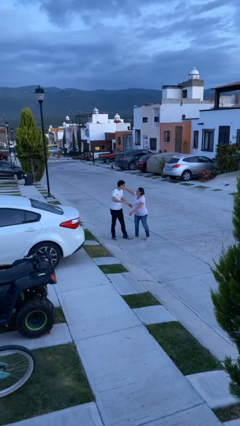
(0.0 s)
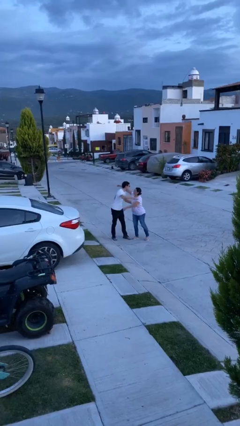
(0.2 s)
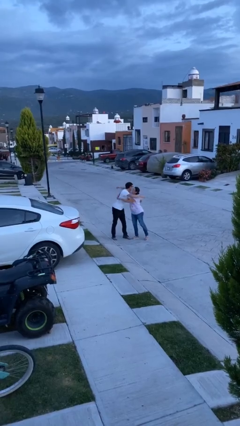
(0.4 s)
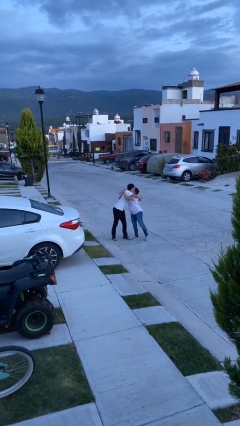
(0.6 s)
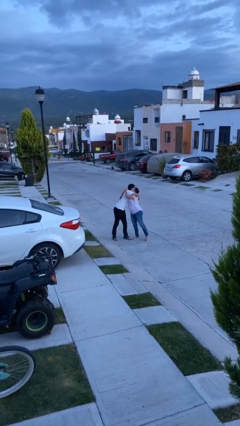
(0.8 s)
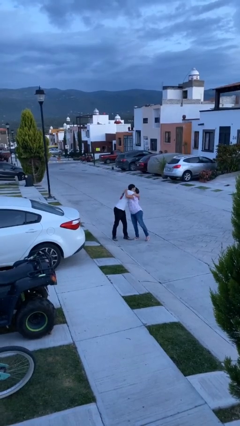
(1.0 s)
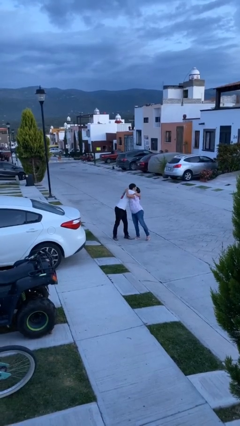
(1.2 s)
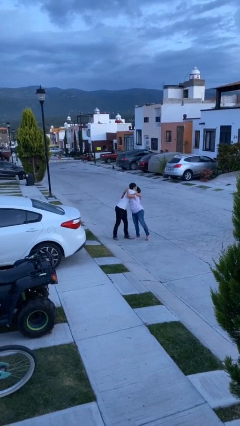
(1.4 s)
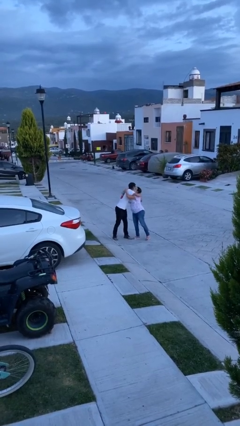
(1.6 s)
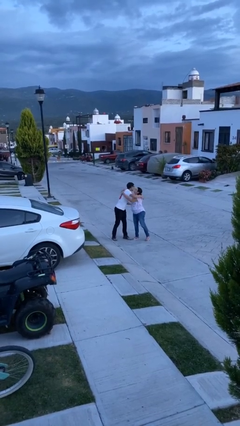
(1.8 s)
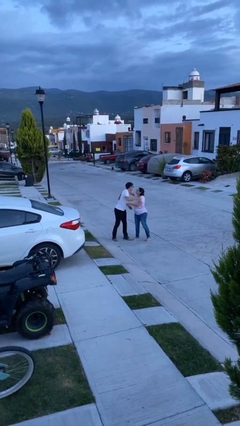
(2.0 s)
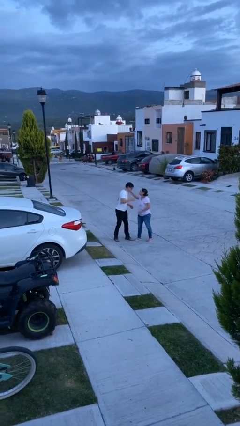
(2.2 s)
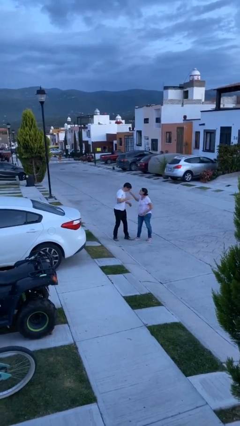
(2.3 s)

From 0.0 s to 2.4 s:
person embraces person

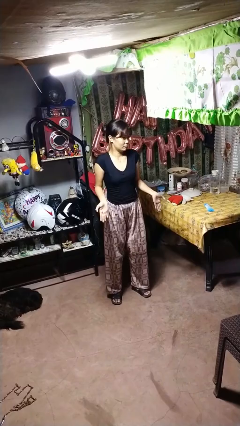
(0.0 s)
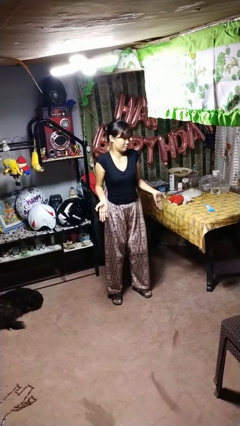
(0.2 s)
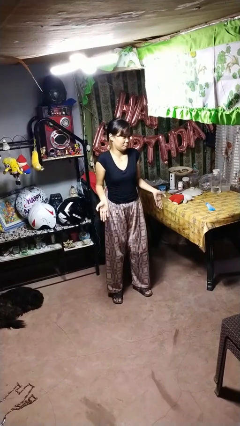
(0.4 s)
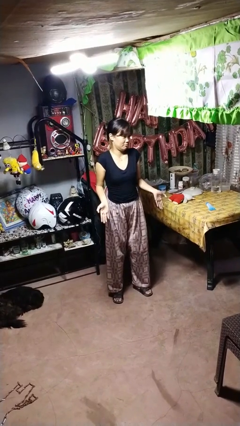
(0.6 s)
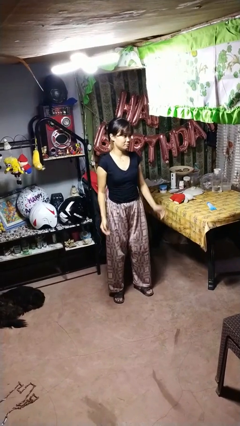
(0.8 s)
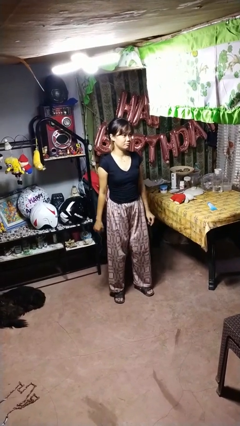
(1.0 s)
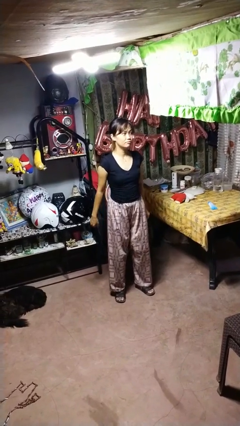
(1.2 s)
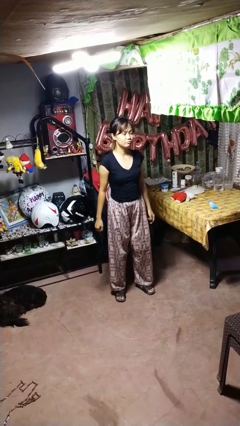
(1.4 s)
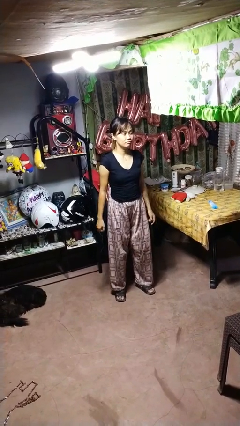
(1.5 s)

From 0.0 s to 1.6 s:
person shrugs

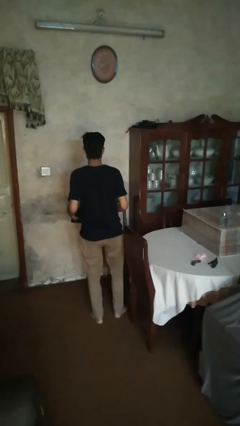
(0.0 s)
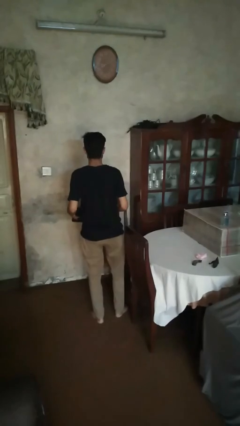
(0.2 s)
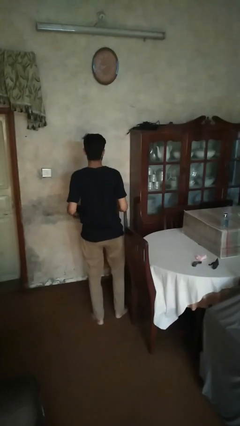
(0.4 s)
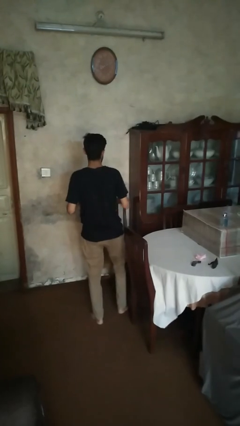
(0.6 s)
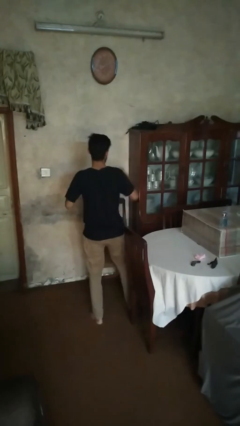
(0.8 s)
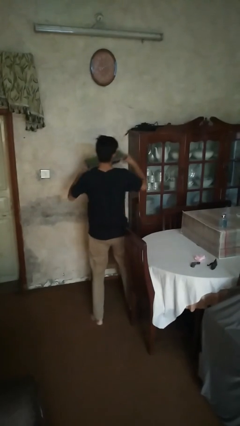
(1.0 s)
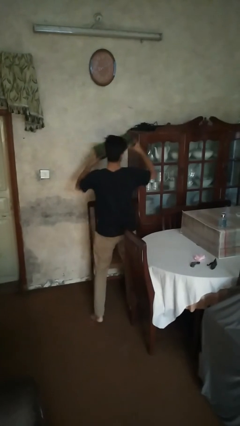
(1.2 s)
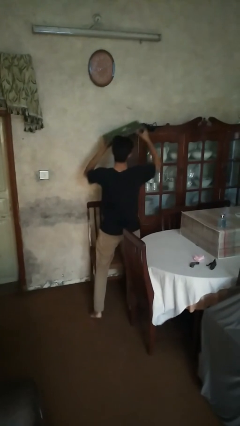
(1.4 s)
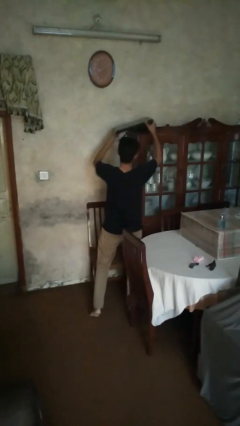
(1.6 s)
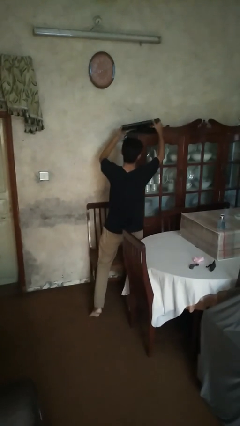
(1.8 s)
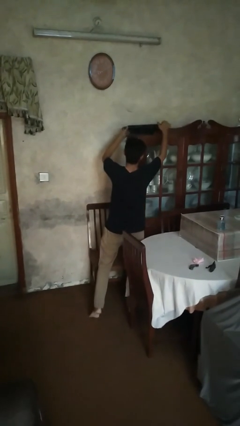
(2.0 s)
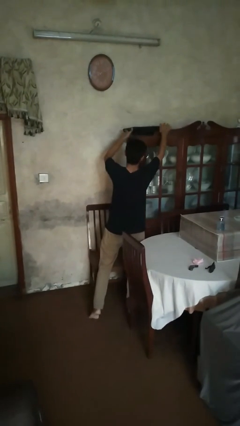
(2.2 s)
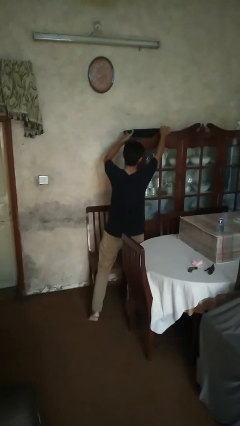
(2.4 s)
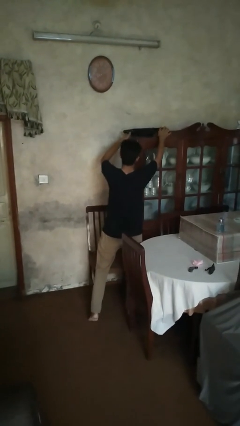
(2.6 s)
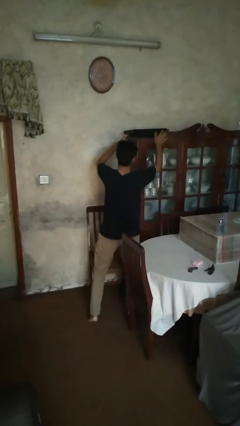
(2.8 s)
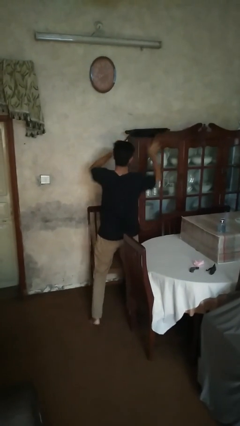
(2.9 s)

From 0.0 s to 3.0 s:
person puts down object into cabinet

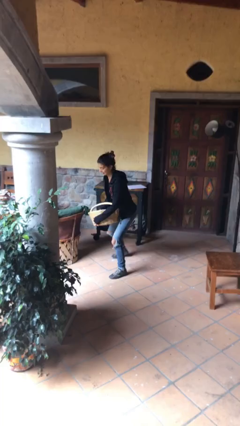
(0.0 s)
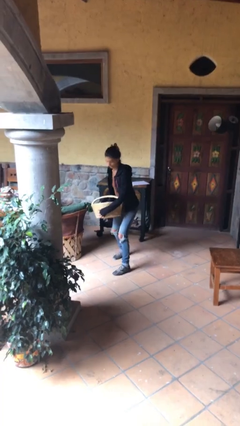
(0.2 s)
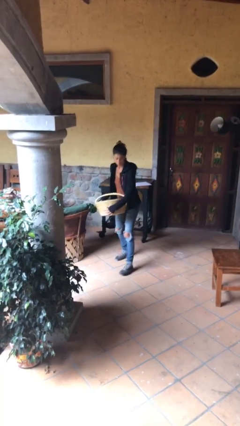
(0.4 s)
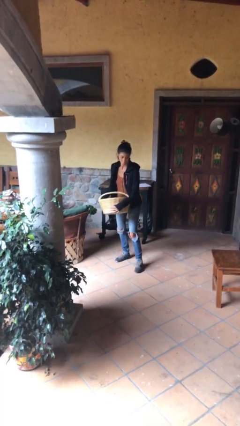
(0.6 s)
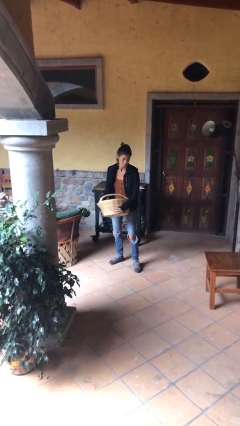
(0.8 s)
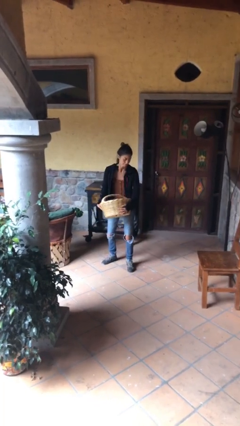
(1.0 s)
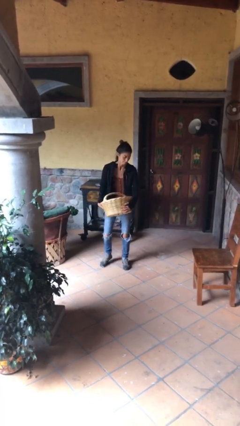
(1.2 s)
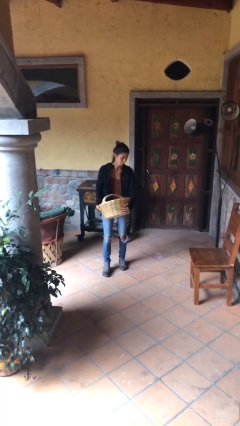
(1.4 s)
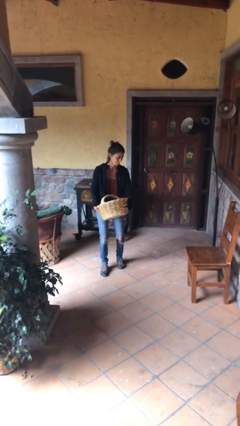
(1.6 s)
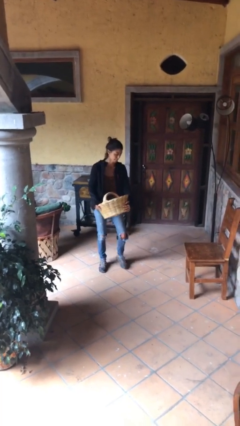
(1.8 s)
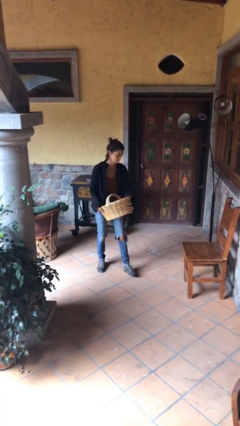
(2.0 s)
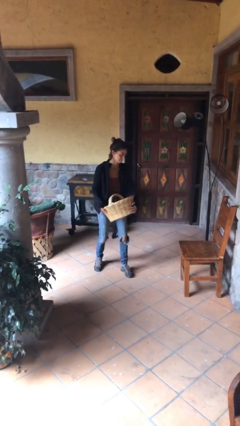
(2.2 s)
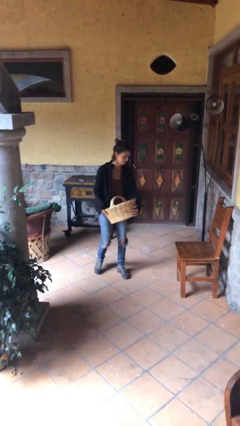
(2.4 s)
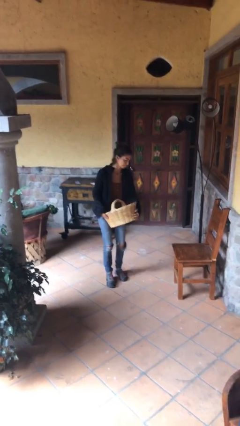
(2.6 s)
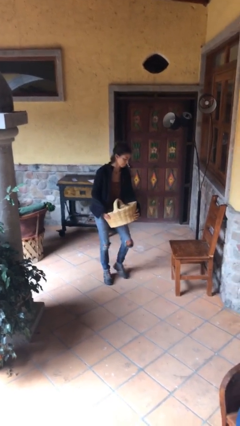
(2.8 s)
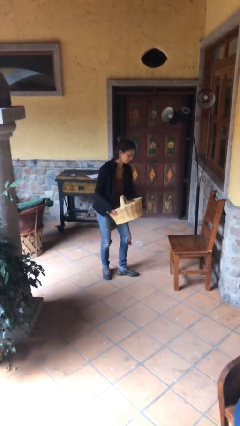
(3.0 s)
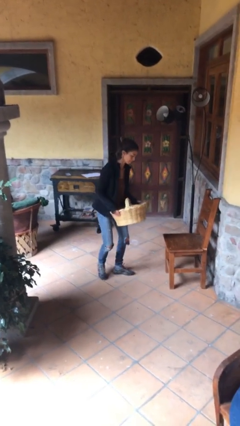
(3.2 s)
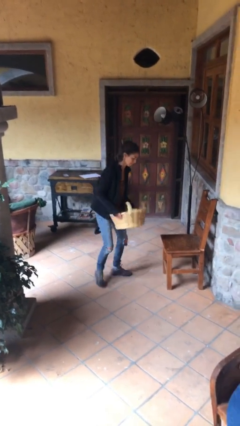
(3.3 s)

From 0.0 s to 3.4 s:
person carries heavy object

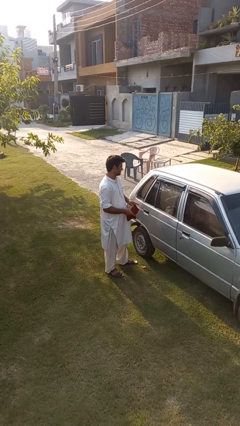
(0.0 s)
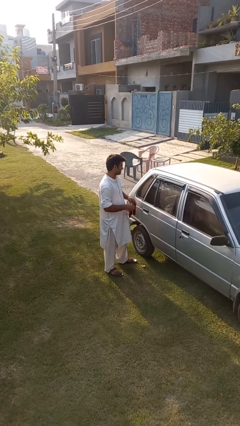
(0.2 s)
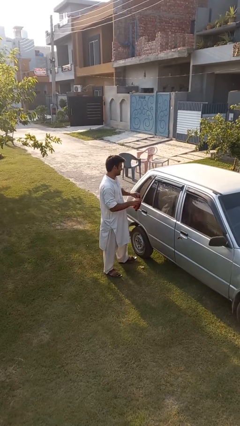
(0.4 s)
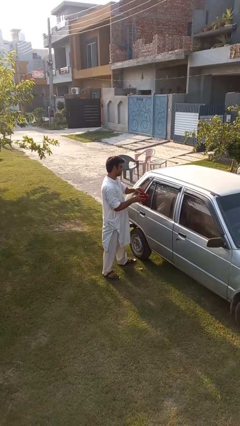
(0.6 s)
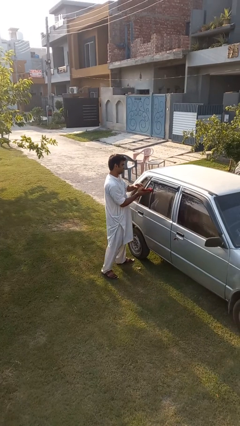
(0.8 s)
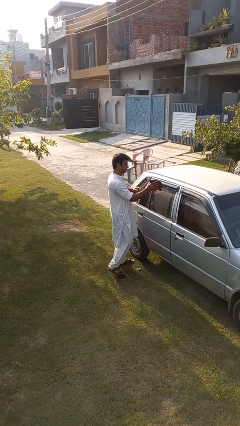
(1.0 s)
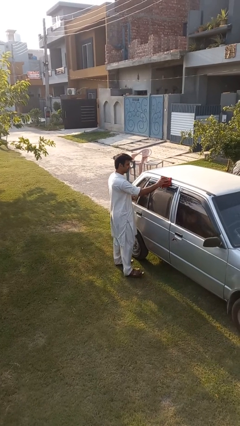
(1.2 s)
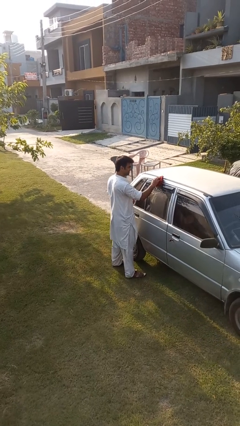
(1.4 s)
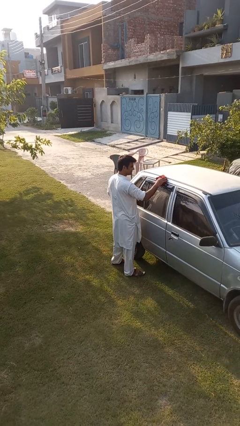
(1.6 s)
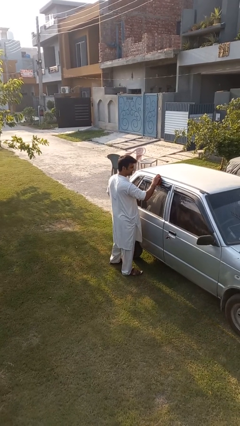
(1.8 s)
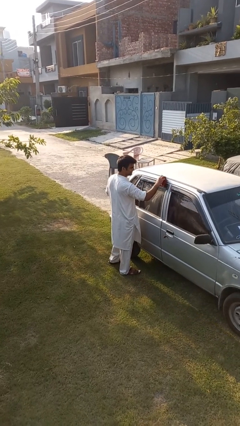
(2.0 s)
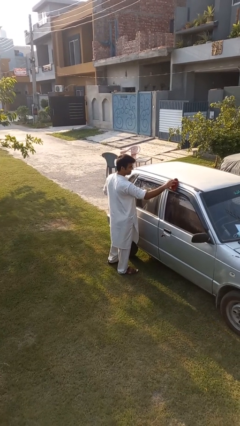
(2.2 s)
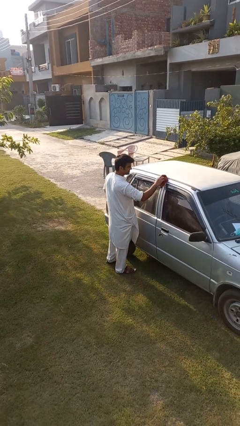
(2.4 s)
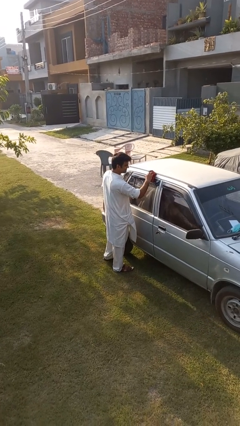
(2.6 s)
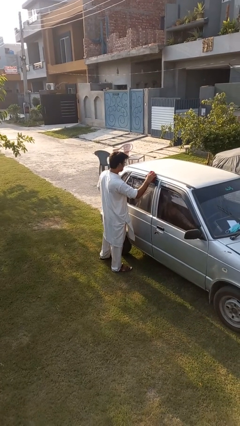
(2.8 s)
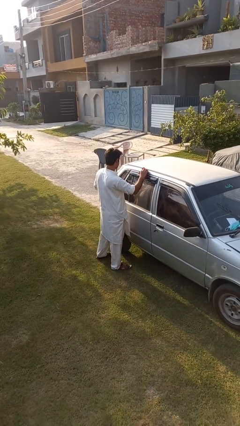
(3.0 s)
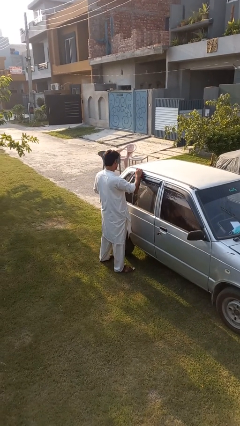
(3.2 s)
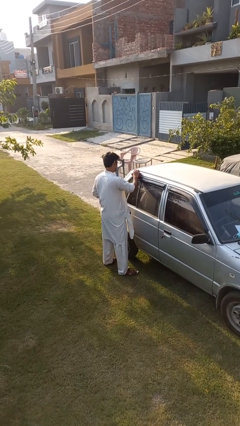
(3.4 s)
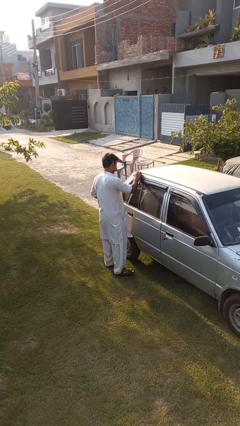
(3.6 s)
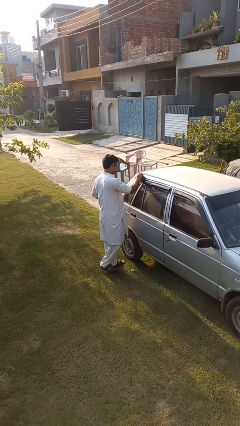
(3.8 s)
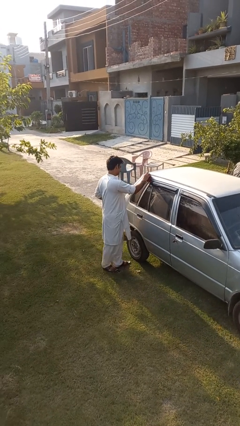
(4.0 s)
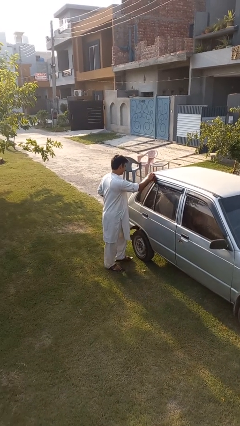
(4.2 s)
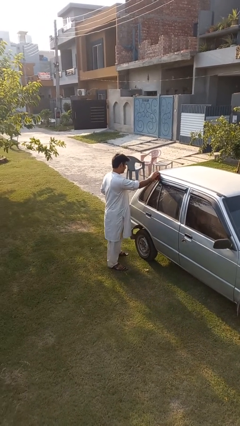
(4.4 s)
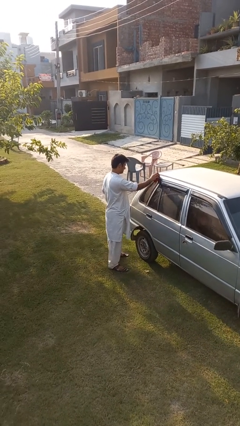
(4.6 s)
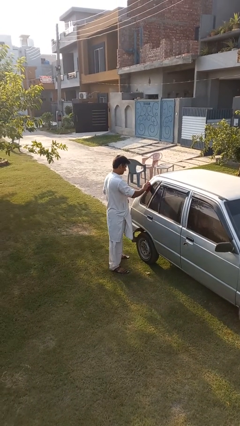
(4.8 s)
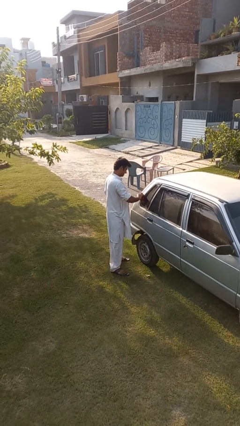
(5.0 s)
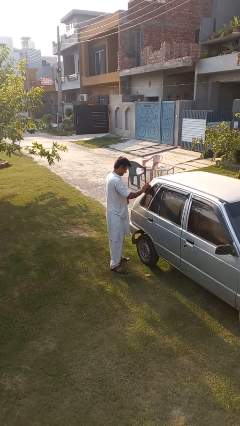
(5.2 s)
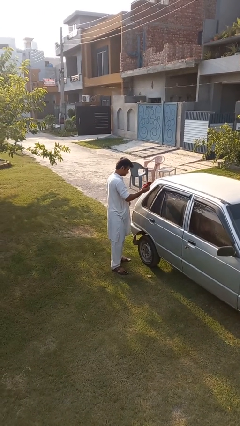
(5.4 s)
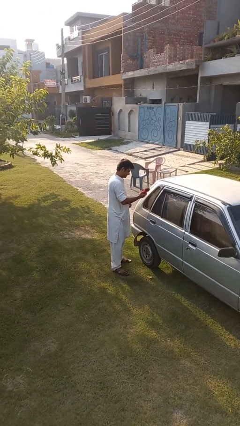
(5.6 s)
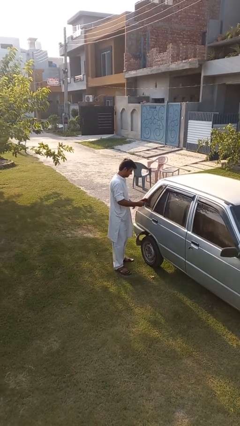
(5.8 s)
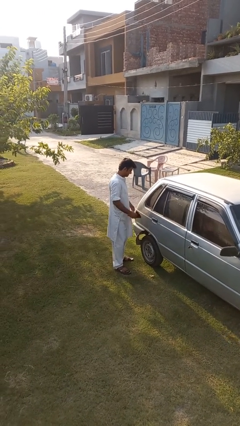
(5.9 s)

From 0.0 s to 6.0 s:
person polishes car with rag

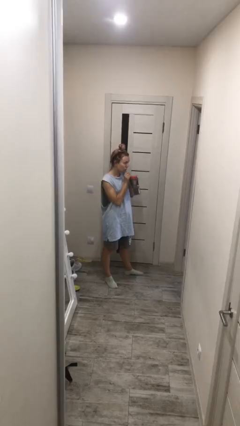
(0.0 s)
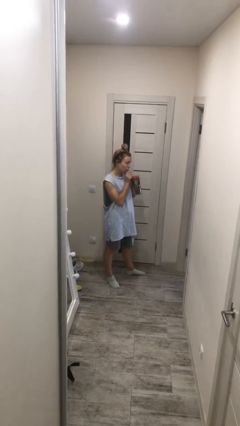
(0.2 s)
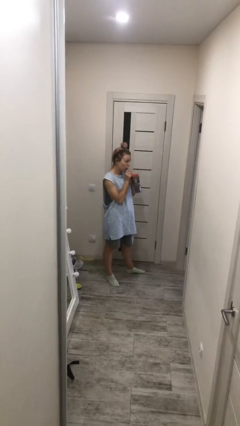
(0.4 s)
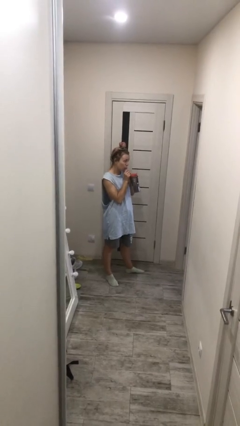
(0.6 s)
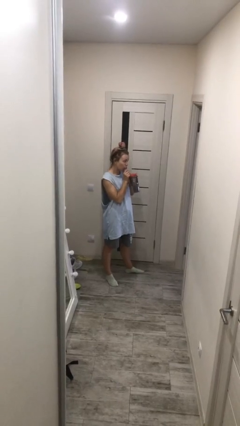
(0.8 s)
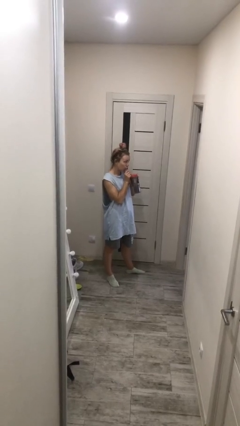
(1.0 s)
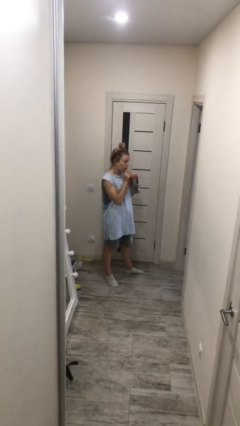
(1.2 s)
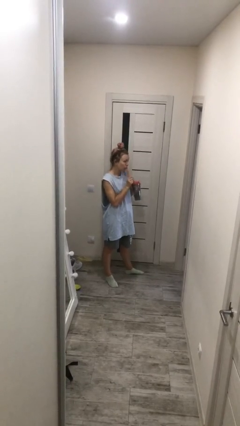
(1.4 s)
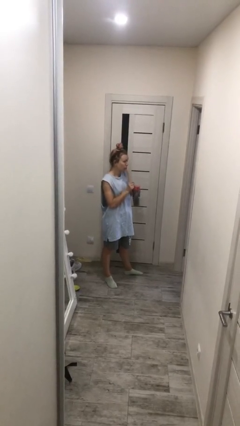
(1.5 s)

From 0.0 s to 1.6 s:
person drinks from straw
